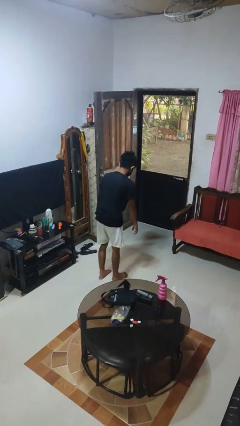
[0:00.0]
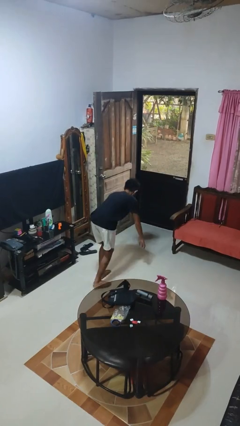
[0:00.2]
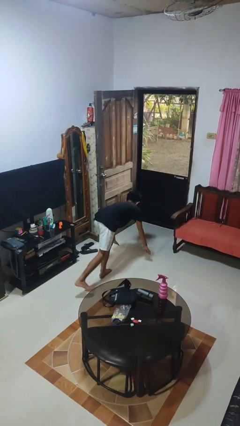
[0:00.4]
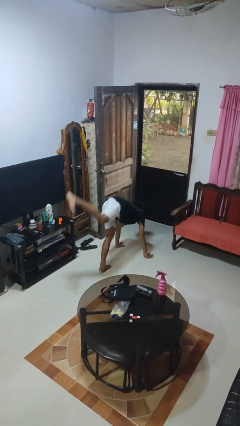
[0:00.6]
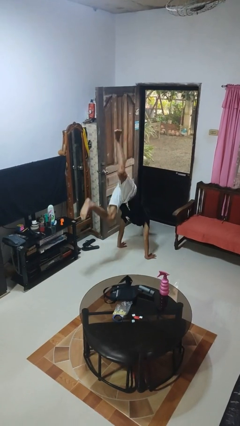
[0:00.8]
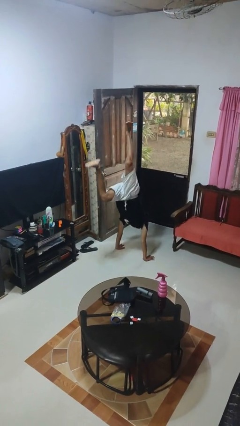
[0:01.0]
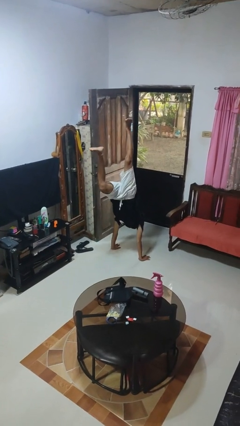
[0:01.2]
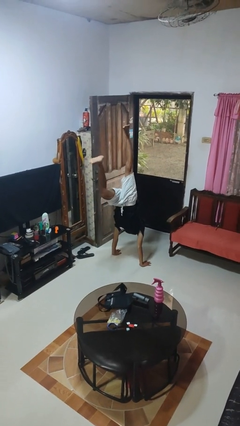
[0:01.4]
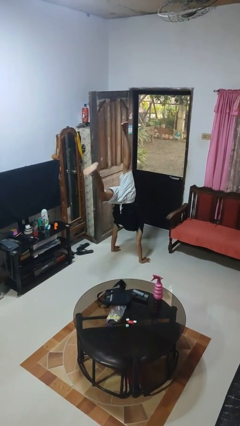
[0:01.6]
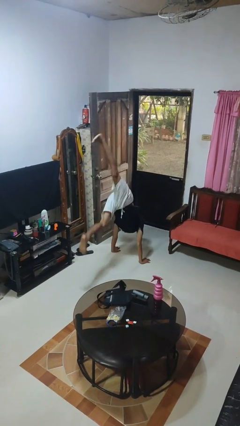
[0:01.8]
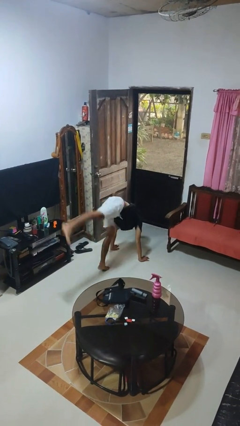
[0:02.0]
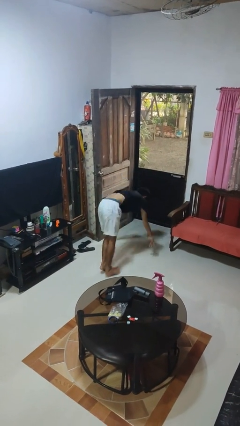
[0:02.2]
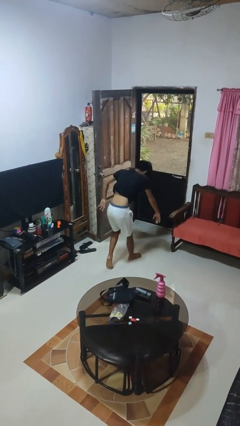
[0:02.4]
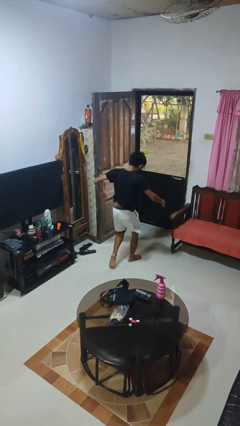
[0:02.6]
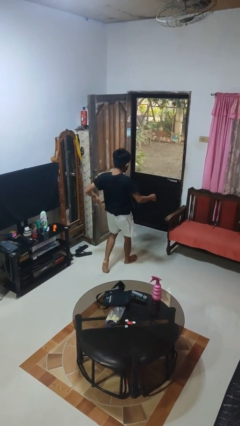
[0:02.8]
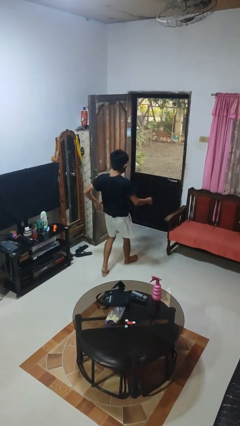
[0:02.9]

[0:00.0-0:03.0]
person handstand

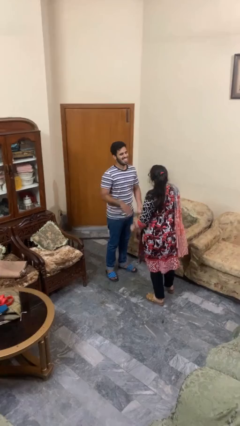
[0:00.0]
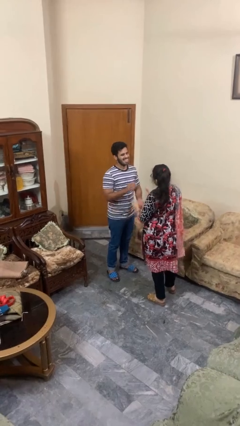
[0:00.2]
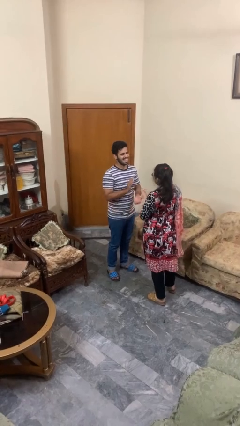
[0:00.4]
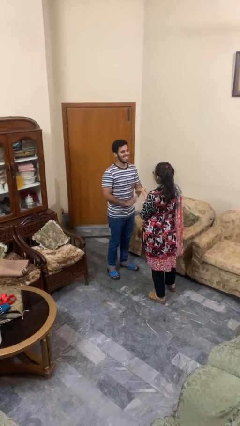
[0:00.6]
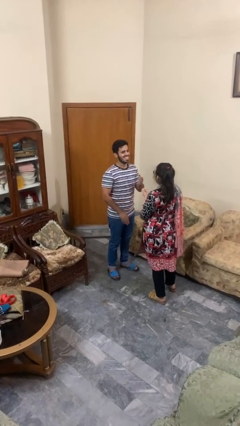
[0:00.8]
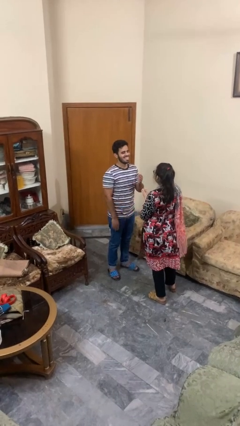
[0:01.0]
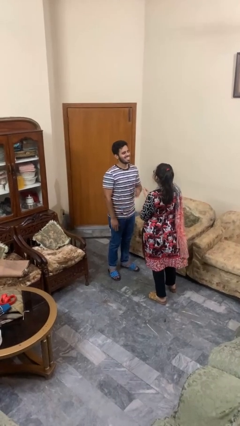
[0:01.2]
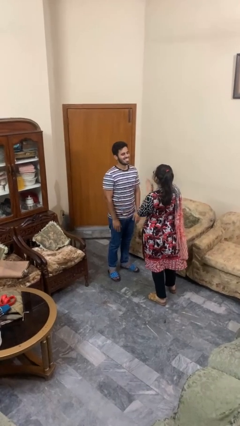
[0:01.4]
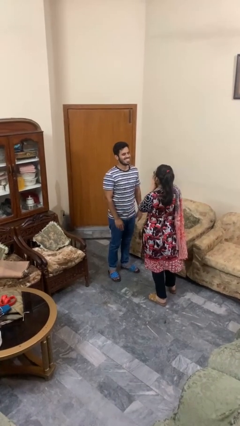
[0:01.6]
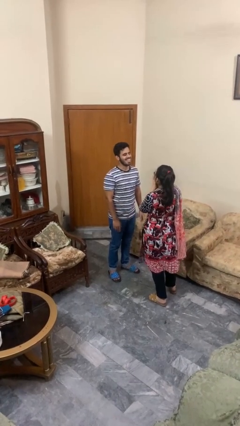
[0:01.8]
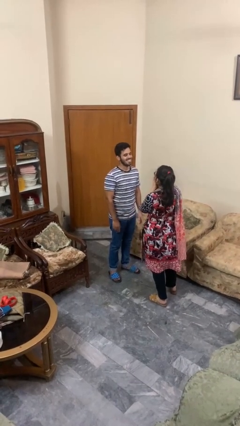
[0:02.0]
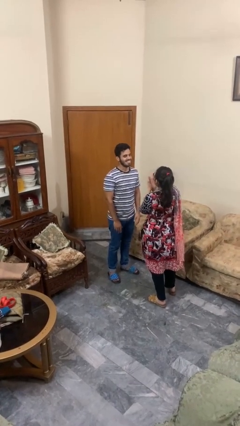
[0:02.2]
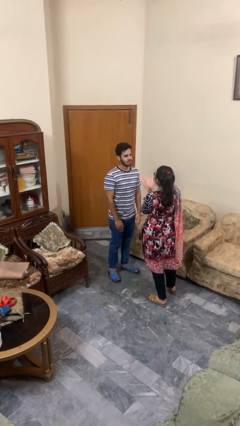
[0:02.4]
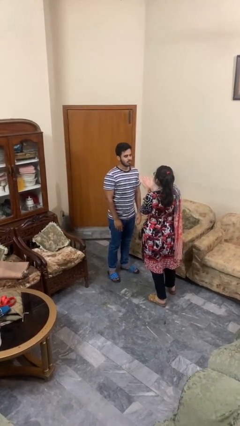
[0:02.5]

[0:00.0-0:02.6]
person laughs with person

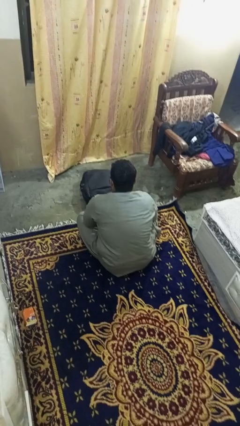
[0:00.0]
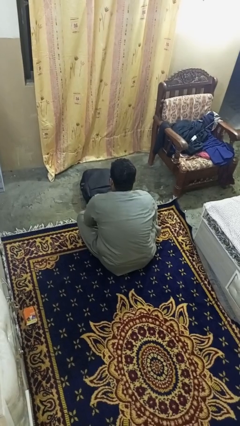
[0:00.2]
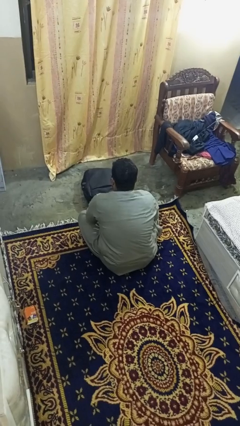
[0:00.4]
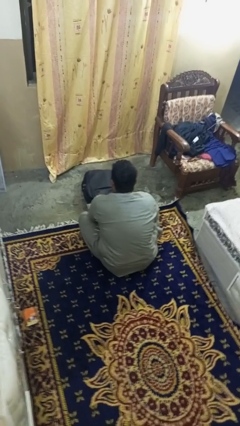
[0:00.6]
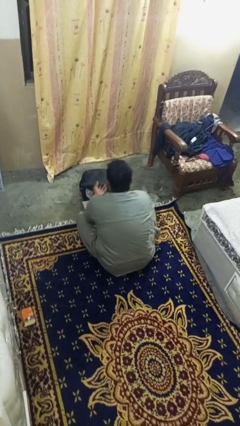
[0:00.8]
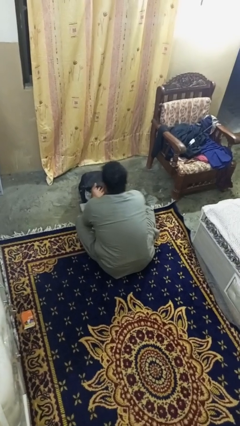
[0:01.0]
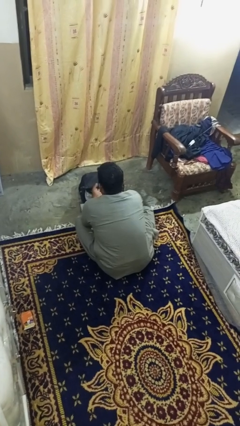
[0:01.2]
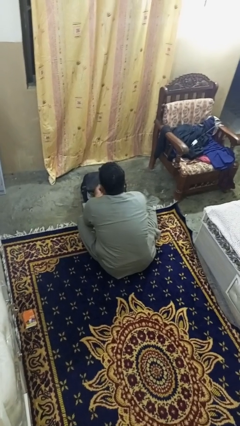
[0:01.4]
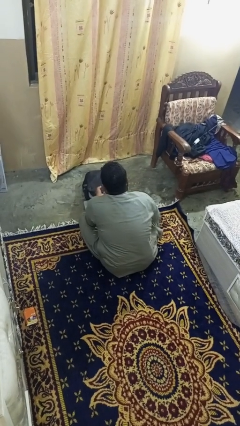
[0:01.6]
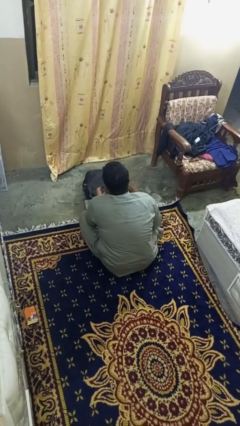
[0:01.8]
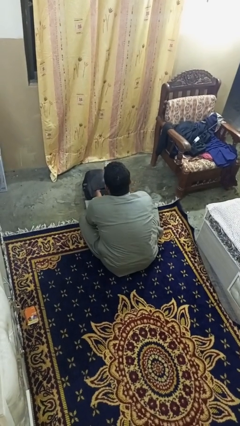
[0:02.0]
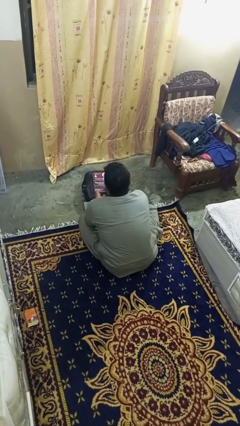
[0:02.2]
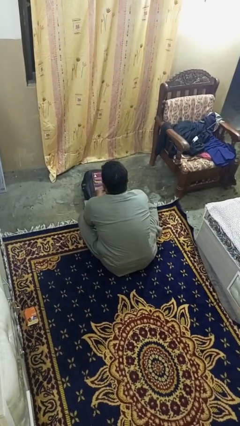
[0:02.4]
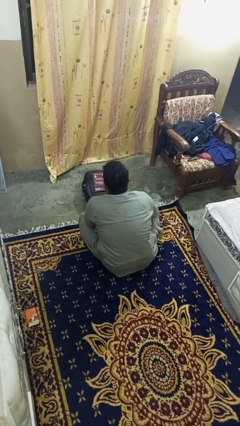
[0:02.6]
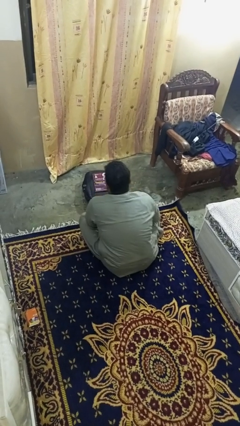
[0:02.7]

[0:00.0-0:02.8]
person takes object from bag

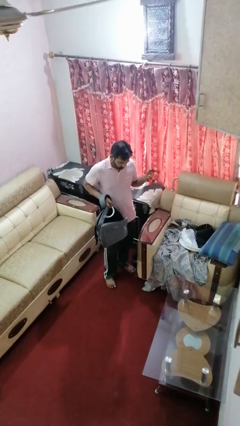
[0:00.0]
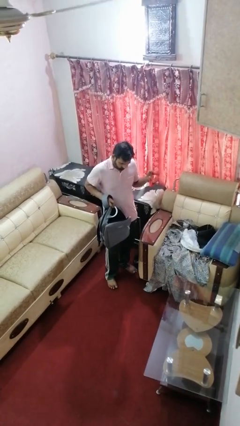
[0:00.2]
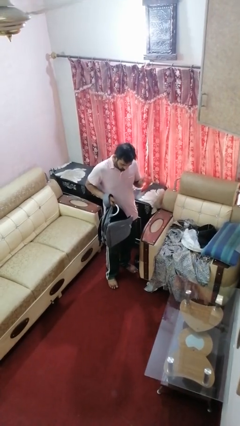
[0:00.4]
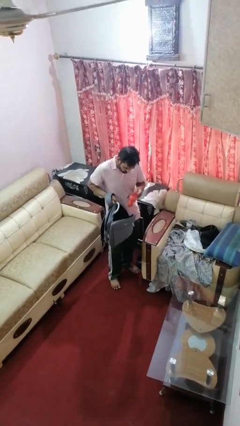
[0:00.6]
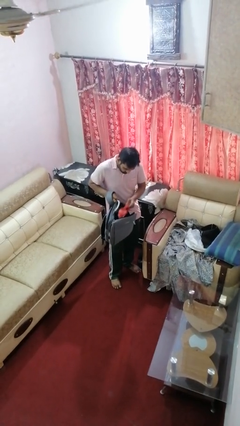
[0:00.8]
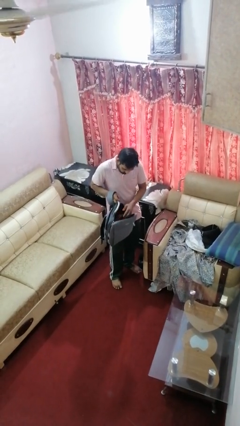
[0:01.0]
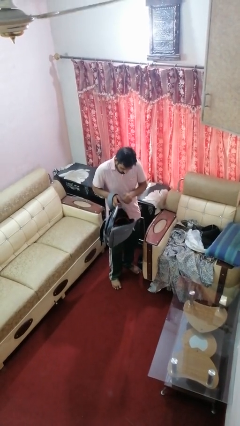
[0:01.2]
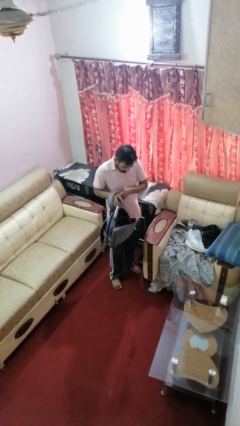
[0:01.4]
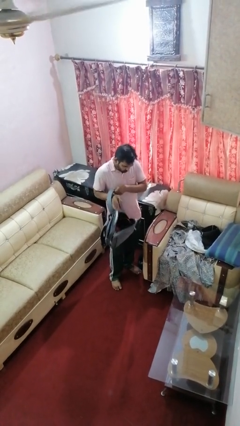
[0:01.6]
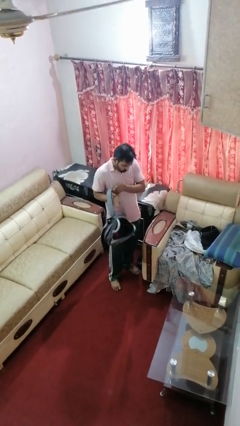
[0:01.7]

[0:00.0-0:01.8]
person puts object into backpack

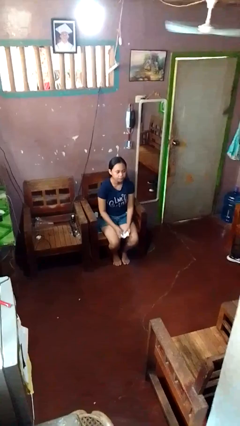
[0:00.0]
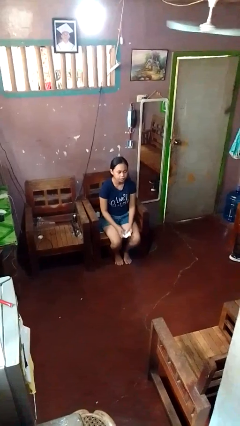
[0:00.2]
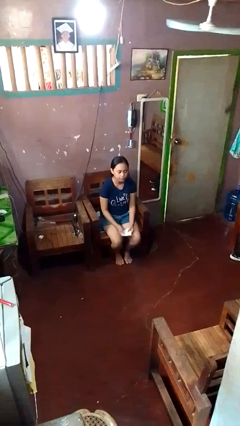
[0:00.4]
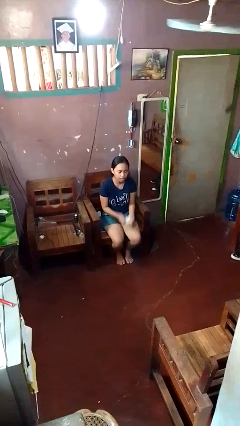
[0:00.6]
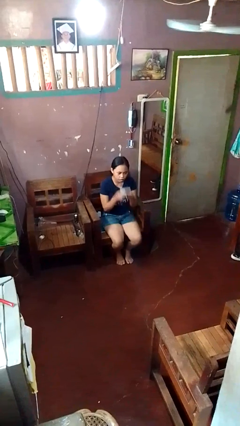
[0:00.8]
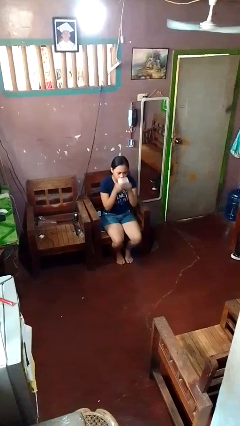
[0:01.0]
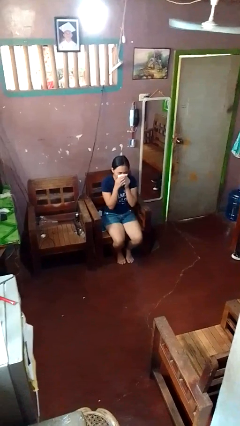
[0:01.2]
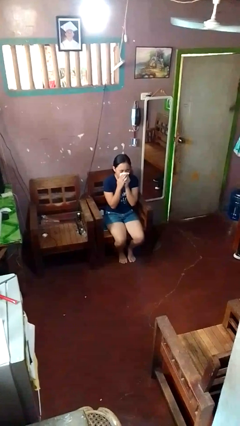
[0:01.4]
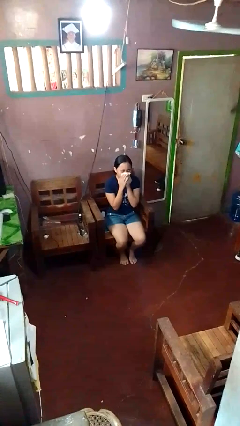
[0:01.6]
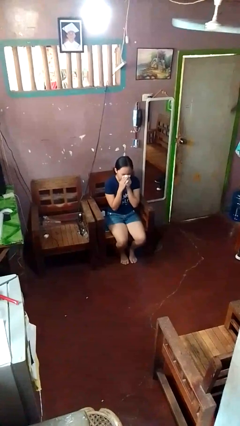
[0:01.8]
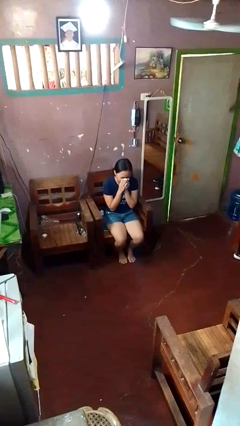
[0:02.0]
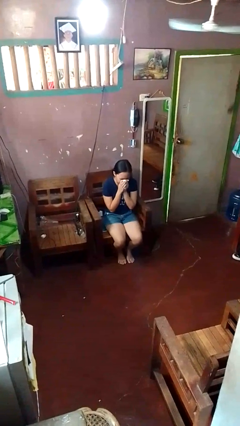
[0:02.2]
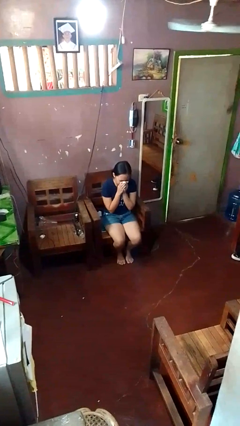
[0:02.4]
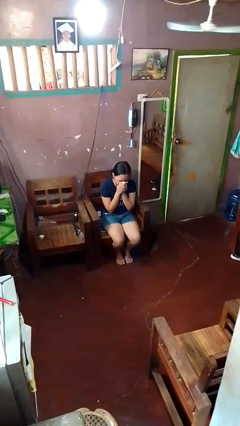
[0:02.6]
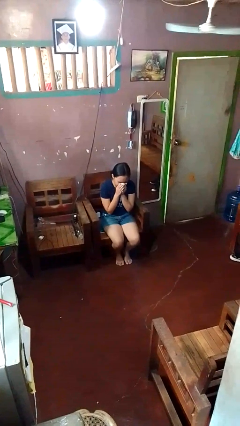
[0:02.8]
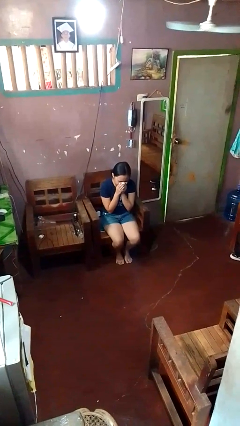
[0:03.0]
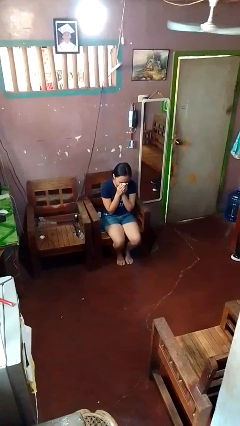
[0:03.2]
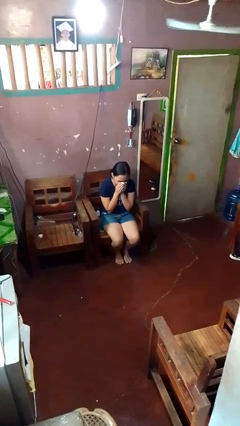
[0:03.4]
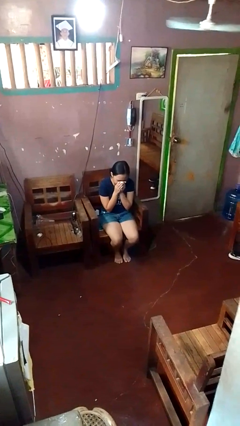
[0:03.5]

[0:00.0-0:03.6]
person blows nose

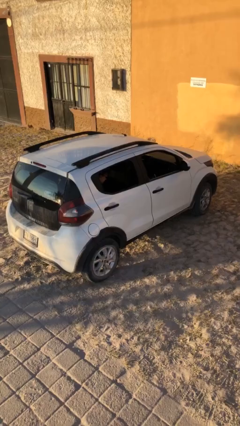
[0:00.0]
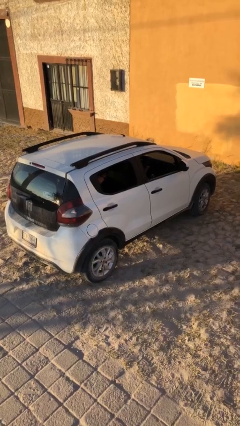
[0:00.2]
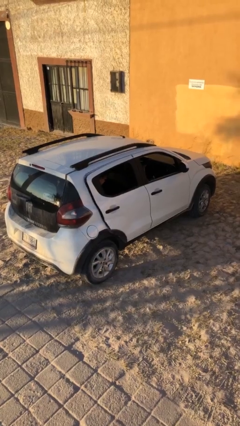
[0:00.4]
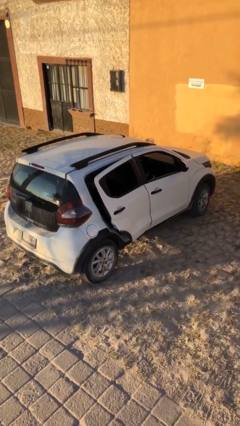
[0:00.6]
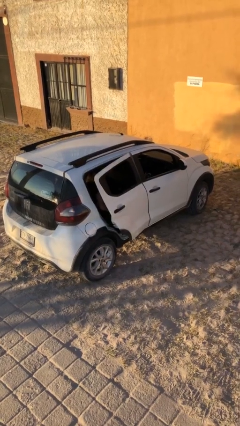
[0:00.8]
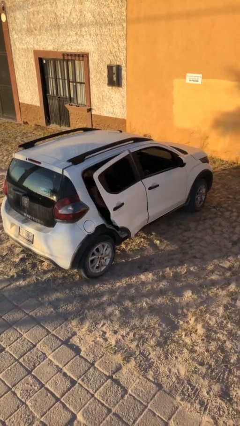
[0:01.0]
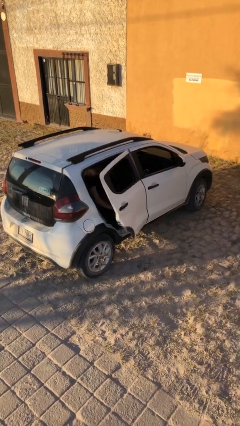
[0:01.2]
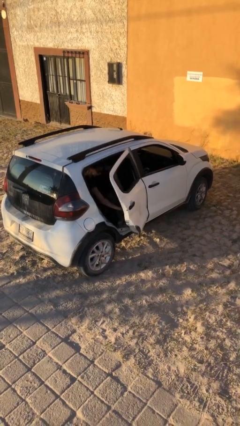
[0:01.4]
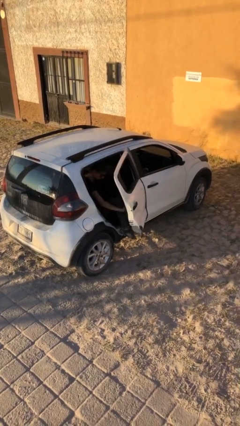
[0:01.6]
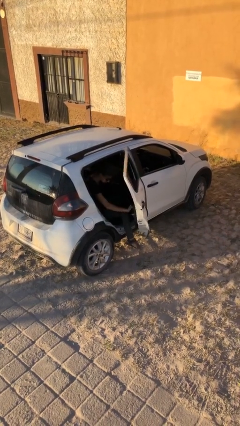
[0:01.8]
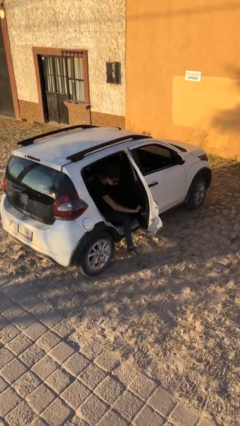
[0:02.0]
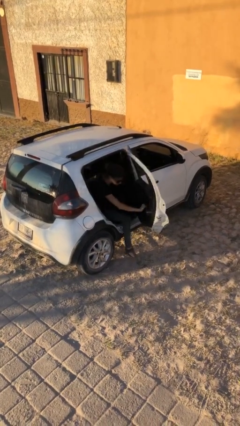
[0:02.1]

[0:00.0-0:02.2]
person opens car door

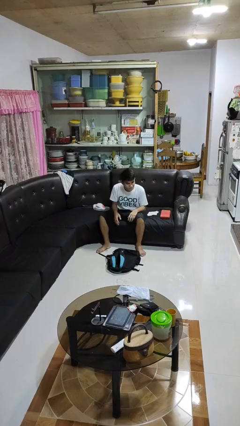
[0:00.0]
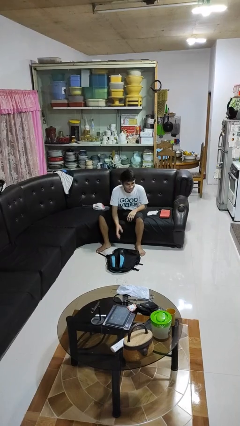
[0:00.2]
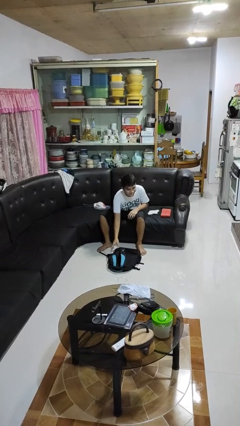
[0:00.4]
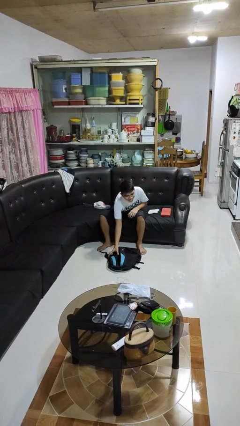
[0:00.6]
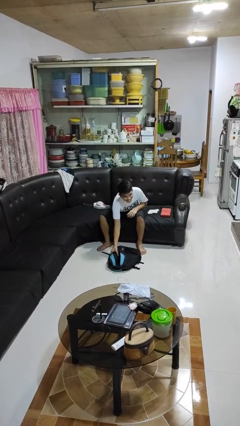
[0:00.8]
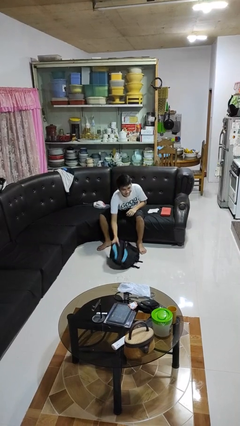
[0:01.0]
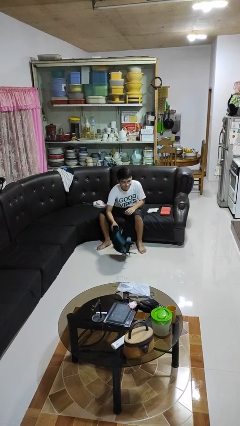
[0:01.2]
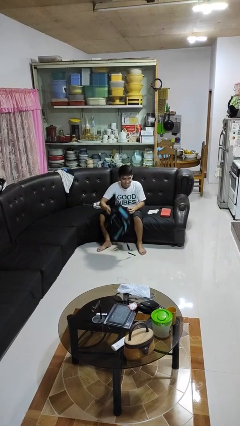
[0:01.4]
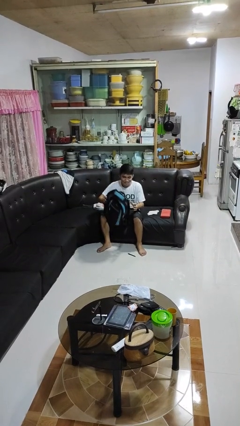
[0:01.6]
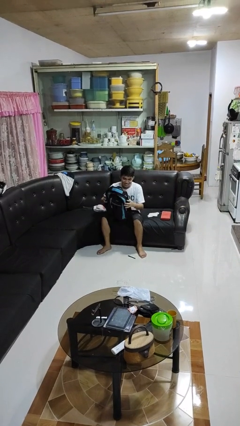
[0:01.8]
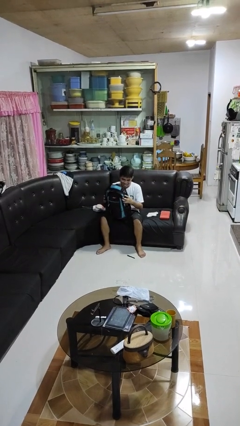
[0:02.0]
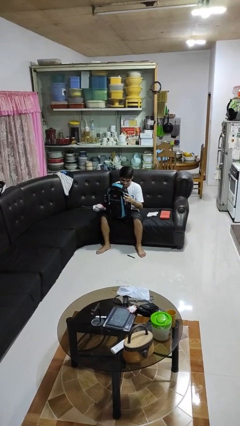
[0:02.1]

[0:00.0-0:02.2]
person picks up object from floor
